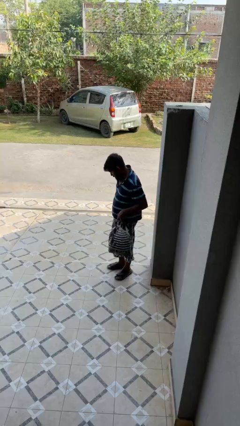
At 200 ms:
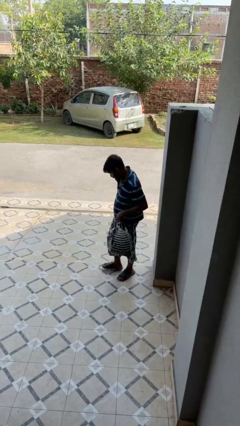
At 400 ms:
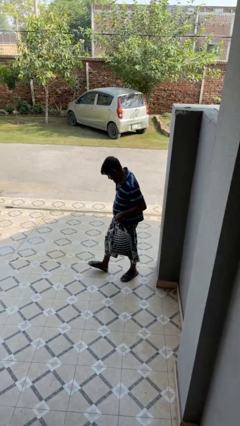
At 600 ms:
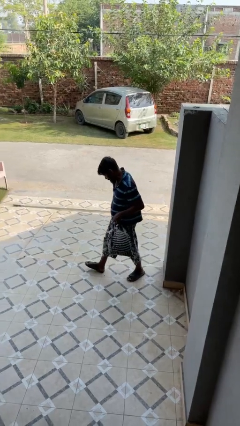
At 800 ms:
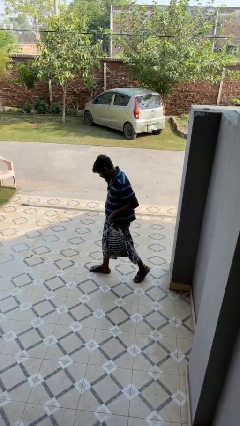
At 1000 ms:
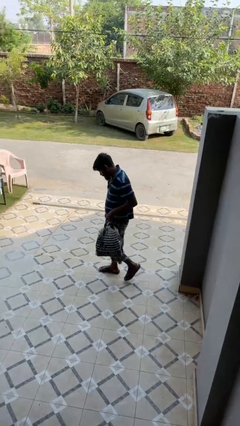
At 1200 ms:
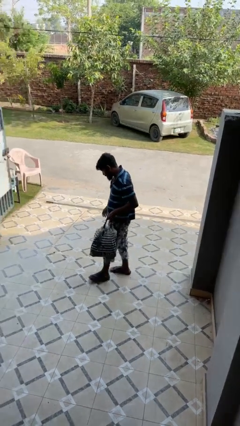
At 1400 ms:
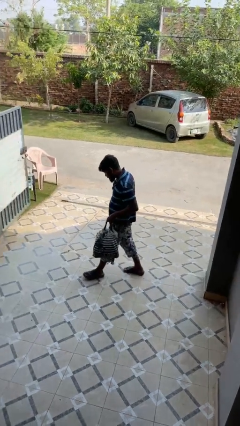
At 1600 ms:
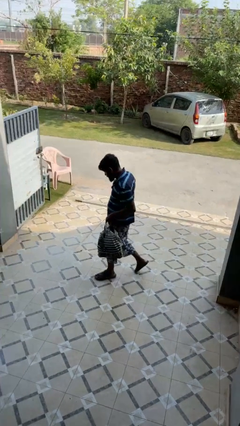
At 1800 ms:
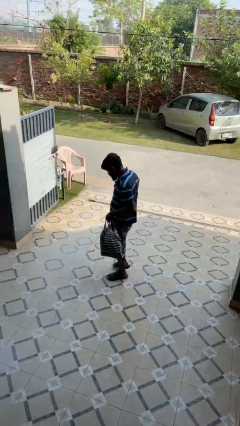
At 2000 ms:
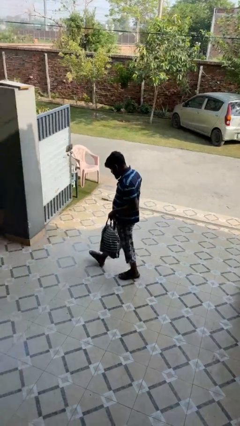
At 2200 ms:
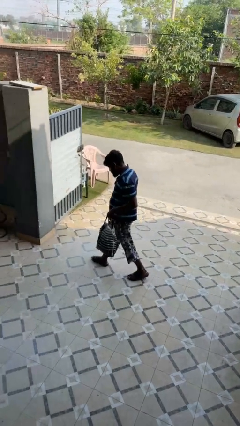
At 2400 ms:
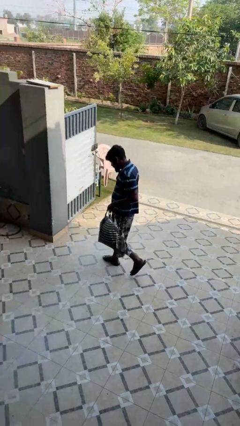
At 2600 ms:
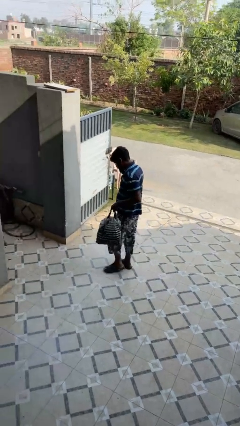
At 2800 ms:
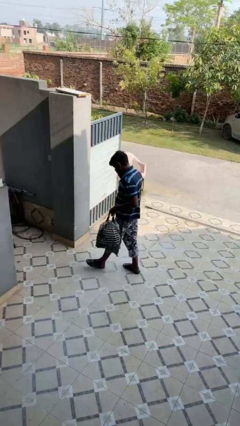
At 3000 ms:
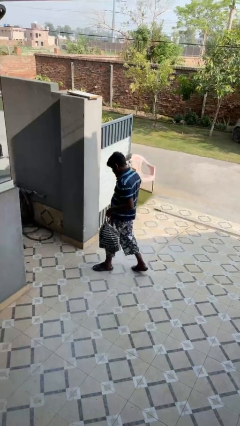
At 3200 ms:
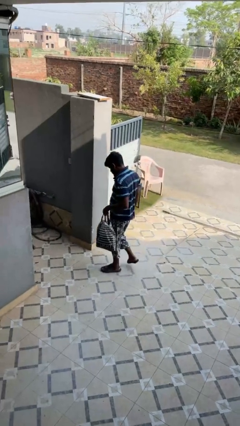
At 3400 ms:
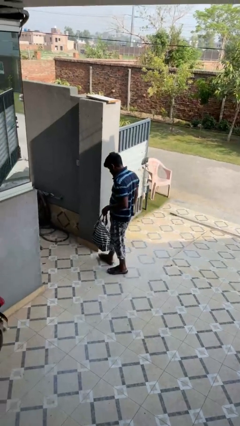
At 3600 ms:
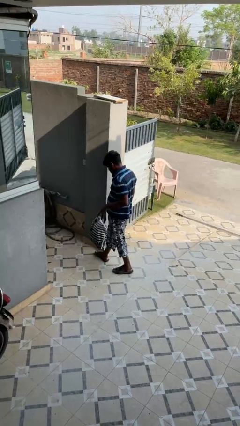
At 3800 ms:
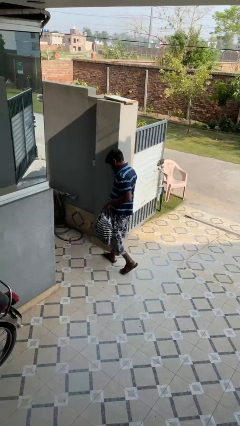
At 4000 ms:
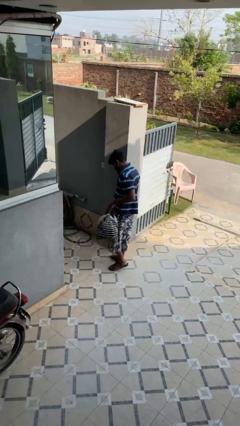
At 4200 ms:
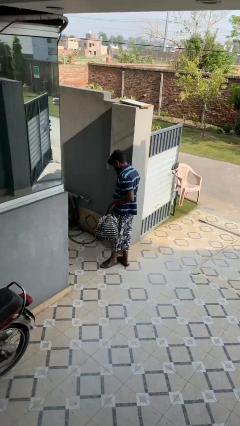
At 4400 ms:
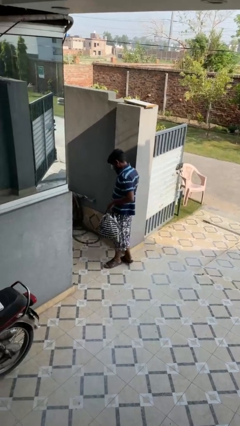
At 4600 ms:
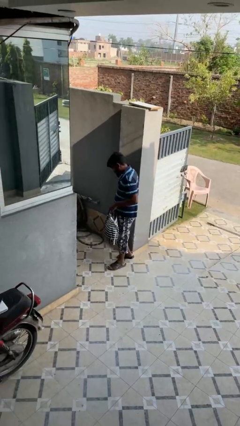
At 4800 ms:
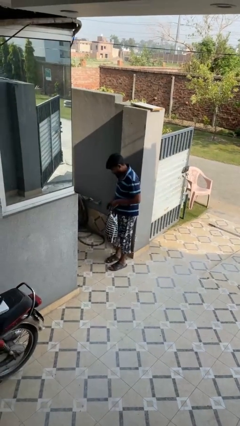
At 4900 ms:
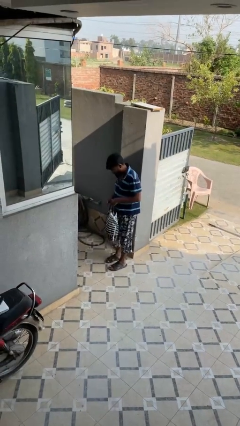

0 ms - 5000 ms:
person carries groceries

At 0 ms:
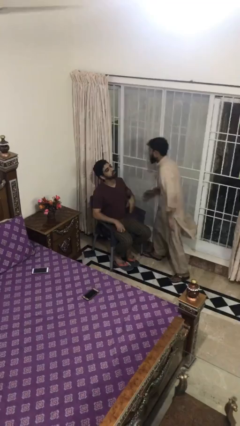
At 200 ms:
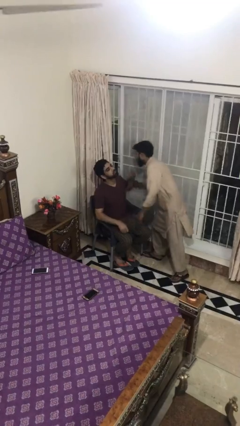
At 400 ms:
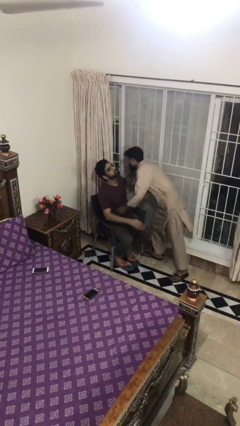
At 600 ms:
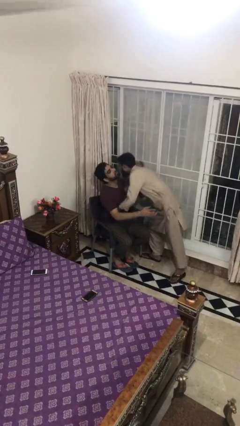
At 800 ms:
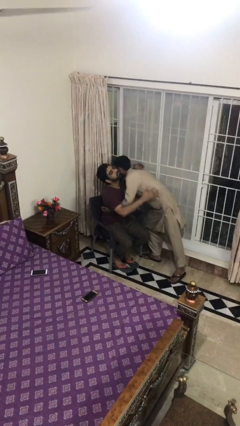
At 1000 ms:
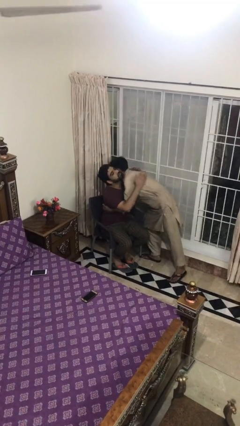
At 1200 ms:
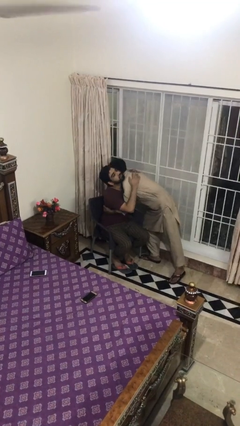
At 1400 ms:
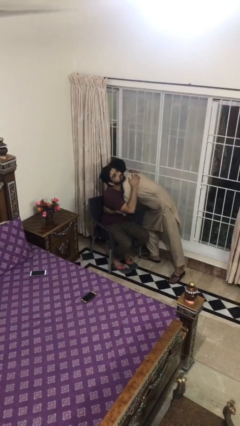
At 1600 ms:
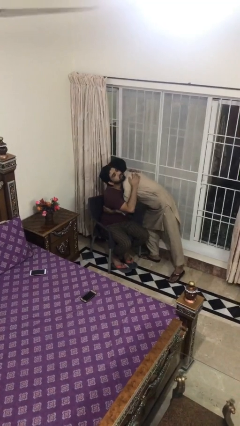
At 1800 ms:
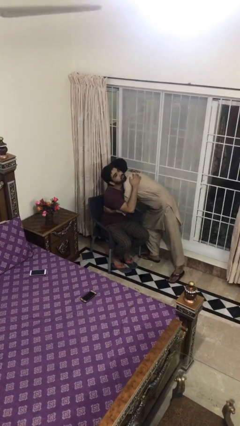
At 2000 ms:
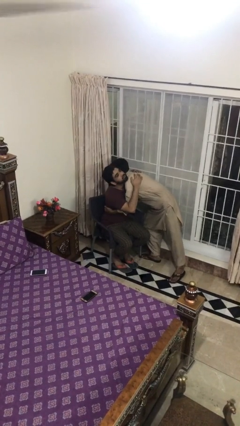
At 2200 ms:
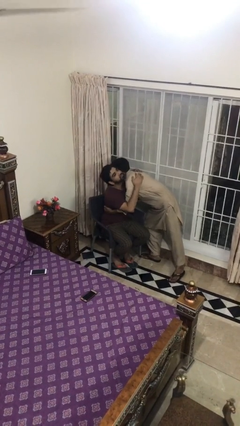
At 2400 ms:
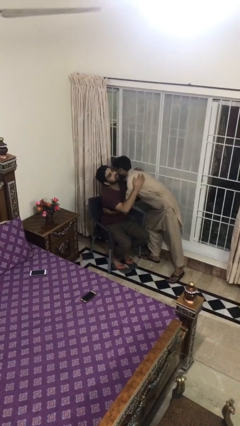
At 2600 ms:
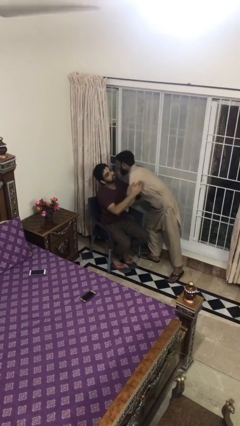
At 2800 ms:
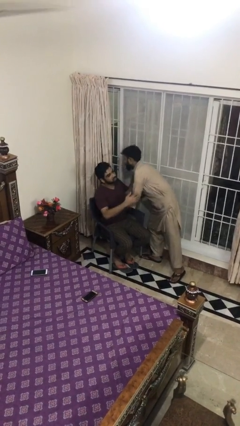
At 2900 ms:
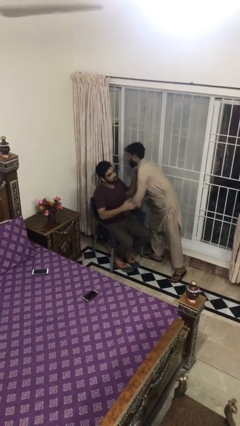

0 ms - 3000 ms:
person embraces person

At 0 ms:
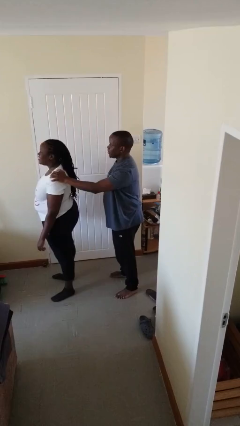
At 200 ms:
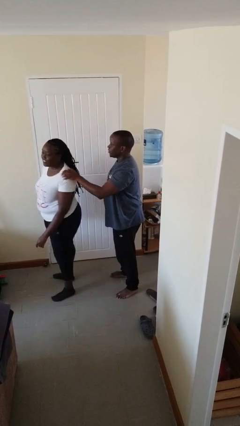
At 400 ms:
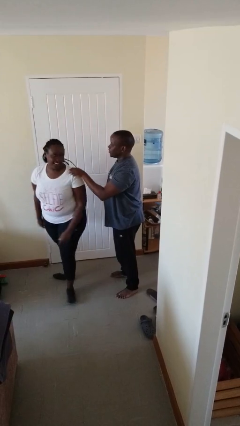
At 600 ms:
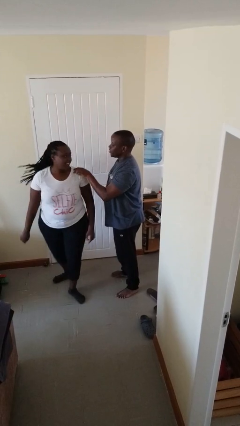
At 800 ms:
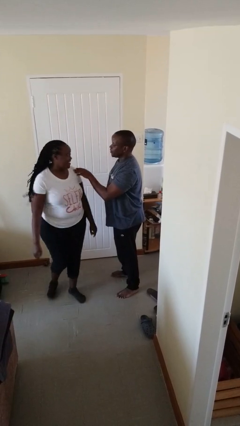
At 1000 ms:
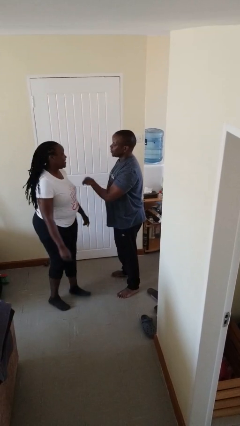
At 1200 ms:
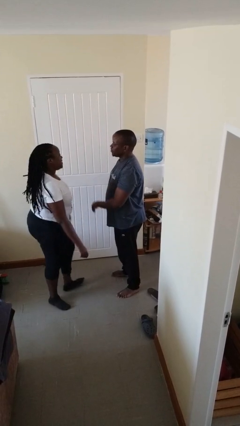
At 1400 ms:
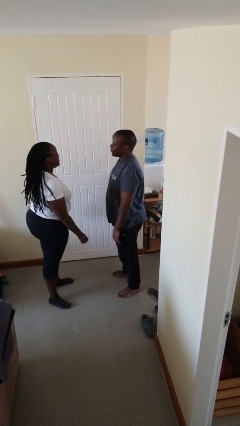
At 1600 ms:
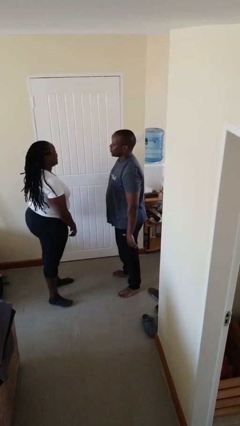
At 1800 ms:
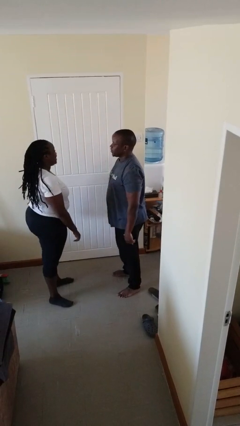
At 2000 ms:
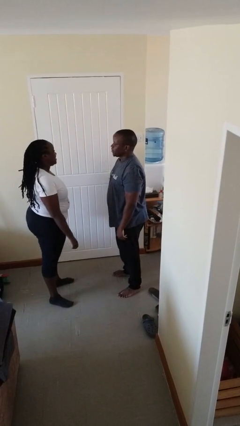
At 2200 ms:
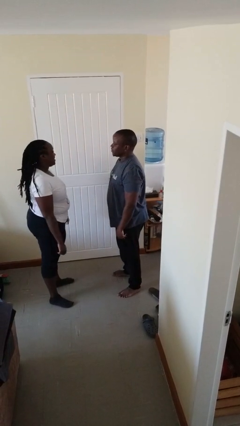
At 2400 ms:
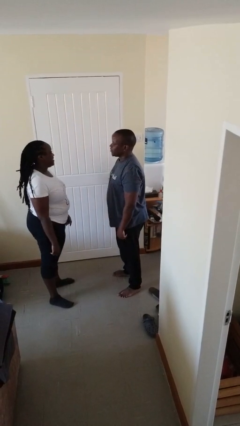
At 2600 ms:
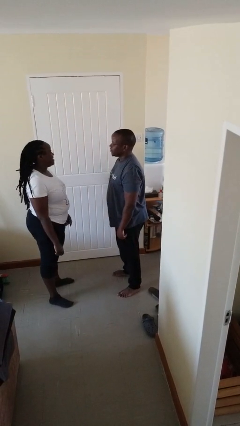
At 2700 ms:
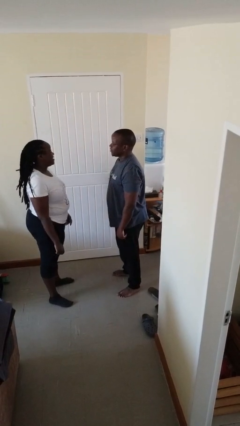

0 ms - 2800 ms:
person spins person around

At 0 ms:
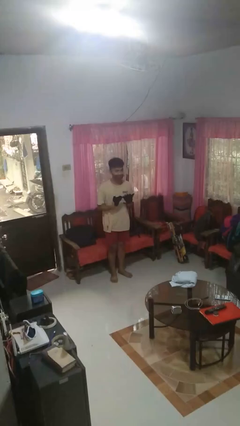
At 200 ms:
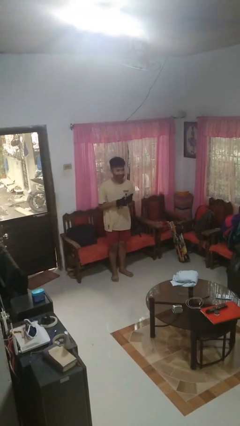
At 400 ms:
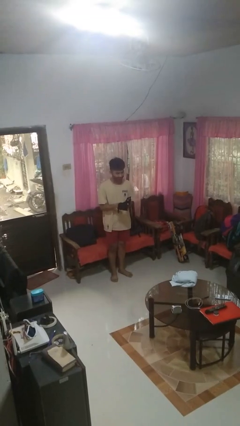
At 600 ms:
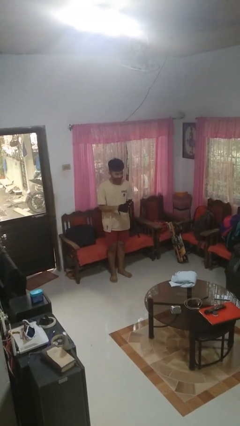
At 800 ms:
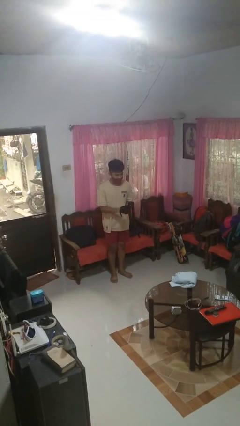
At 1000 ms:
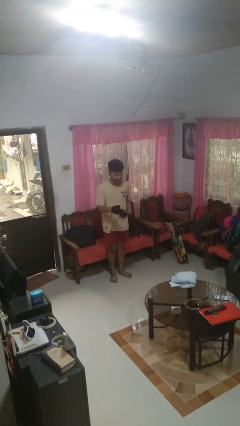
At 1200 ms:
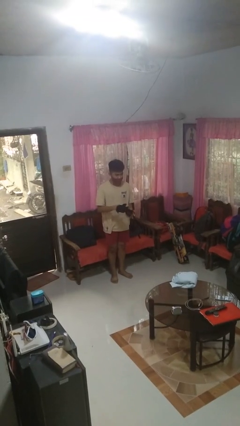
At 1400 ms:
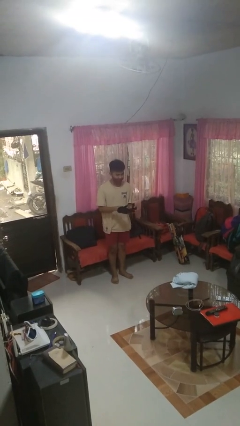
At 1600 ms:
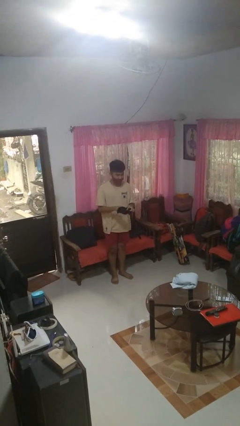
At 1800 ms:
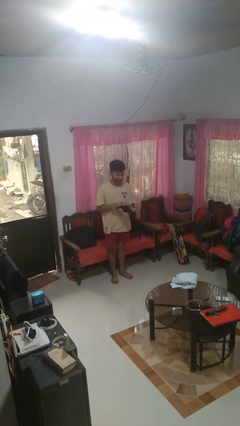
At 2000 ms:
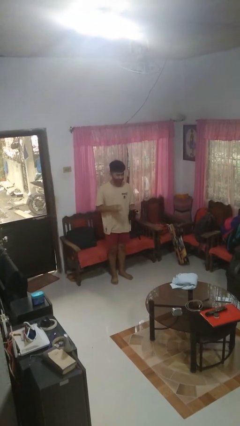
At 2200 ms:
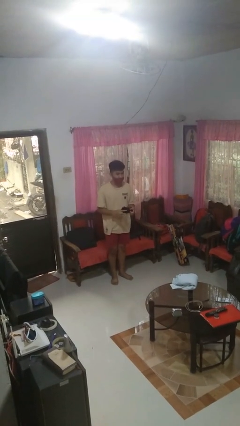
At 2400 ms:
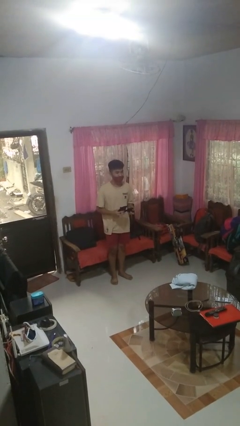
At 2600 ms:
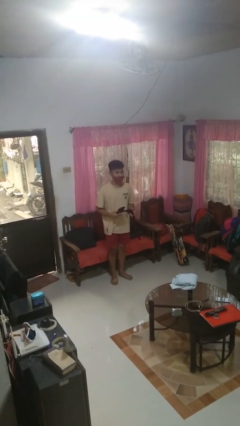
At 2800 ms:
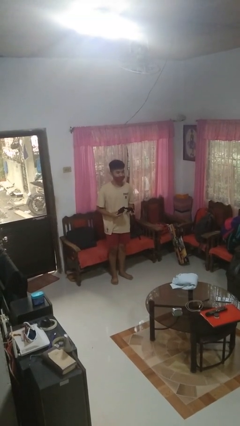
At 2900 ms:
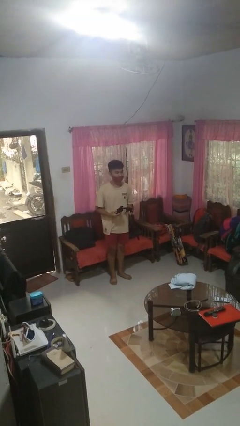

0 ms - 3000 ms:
person takes off gloves

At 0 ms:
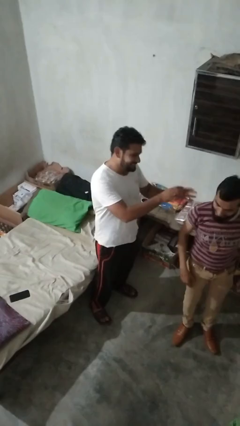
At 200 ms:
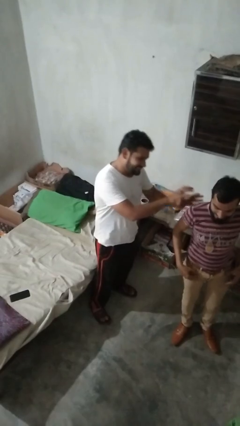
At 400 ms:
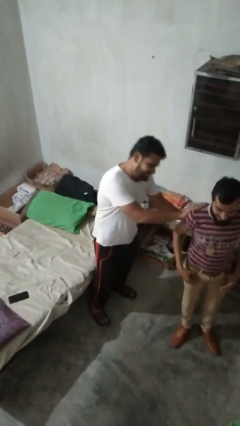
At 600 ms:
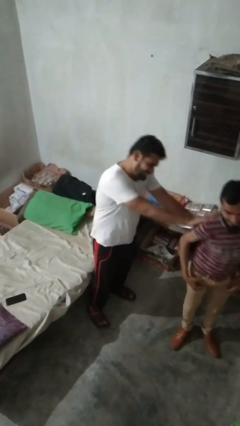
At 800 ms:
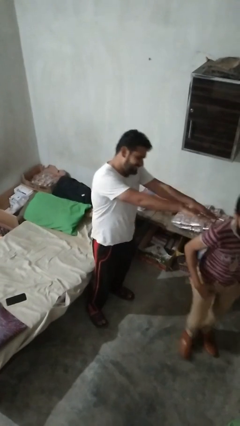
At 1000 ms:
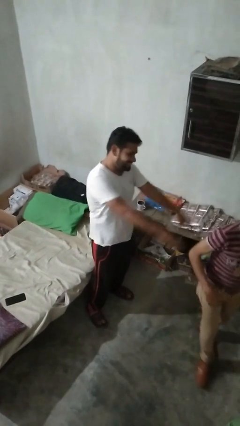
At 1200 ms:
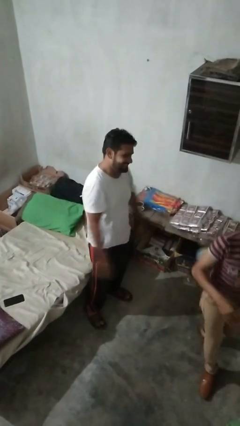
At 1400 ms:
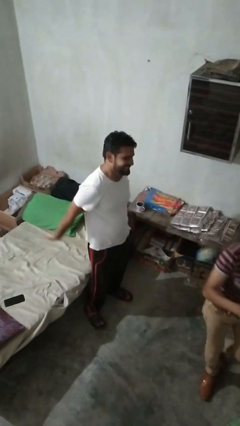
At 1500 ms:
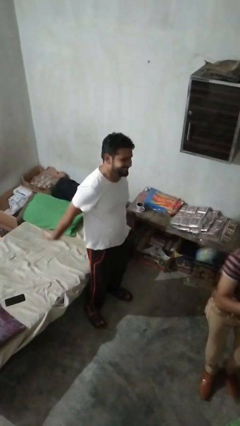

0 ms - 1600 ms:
person shoves person

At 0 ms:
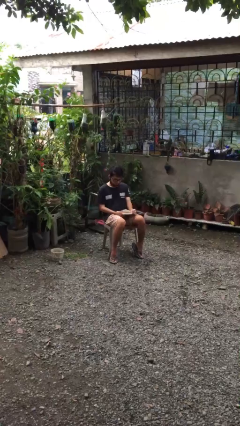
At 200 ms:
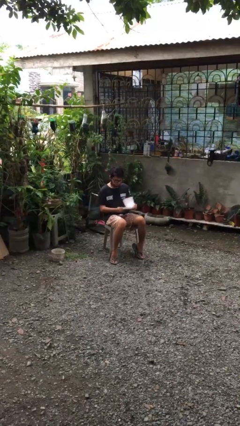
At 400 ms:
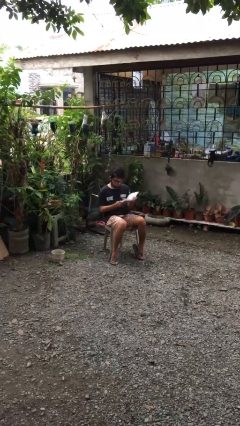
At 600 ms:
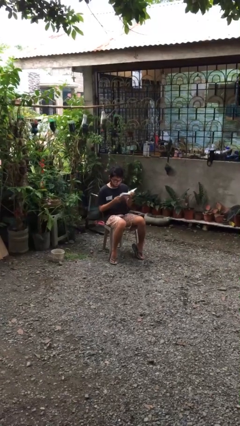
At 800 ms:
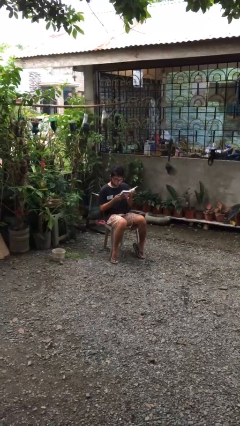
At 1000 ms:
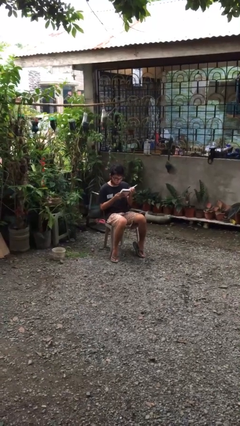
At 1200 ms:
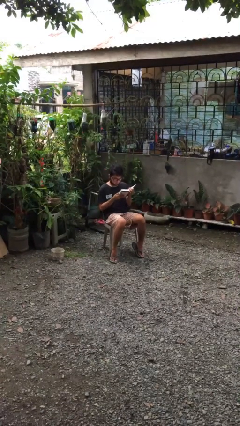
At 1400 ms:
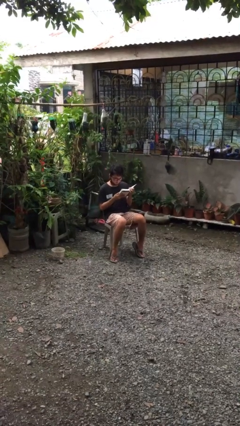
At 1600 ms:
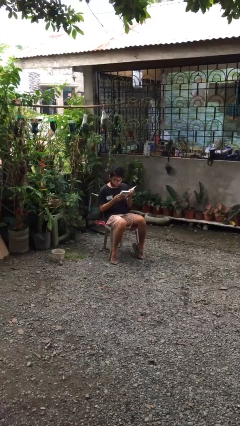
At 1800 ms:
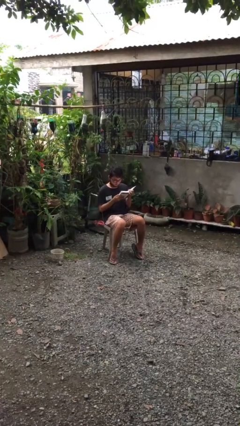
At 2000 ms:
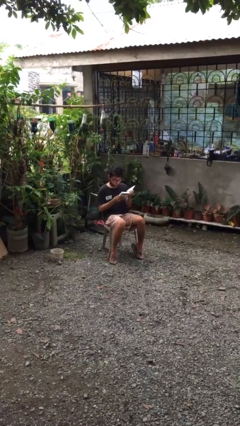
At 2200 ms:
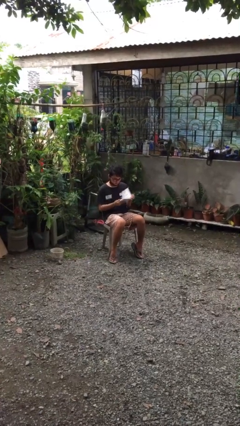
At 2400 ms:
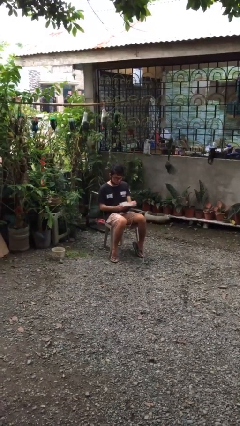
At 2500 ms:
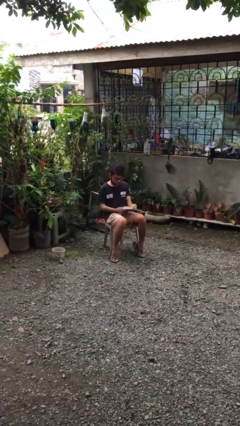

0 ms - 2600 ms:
person reads document
